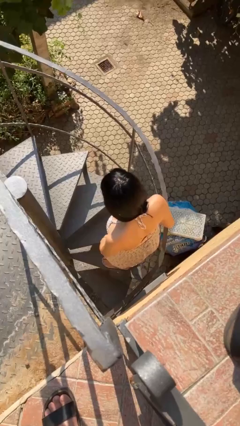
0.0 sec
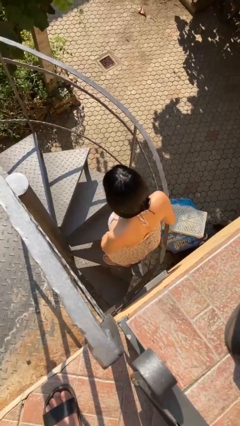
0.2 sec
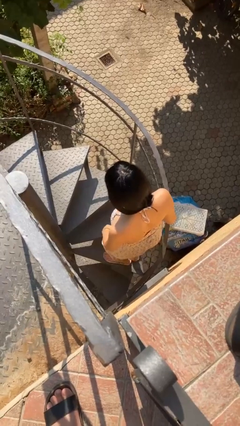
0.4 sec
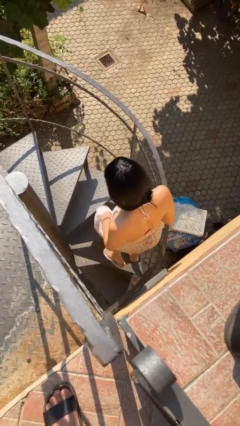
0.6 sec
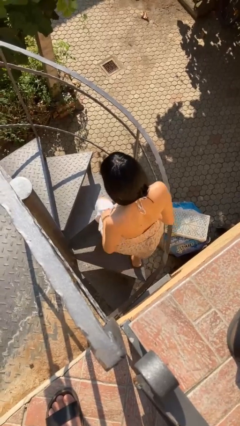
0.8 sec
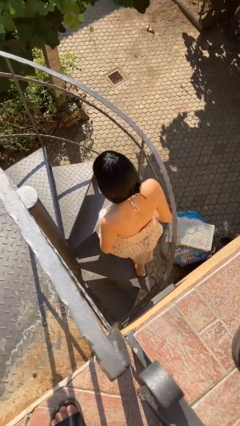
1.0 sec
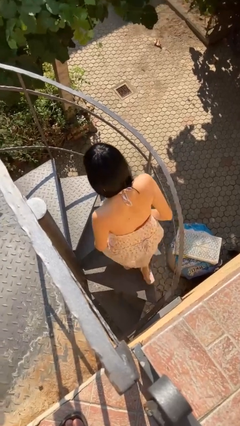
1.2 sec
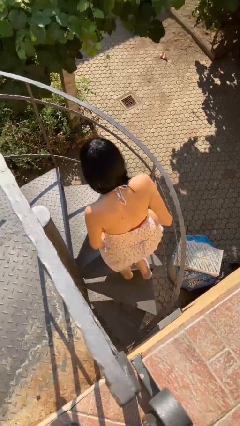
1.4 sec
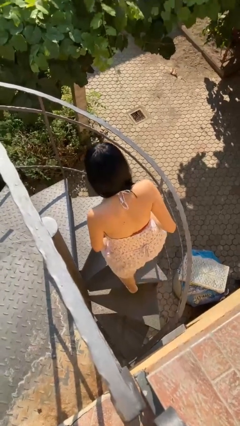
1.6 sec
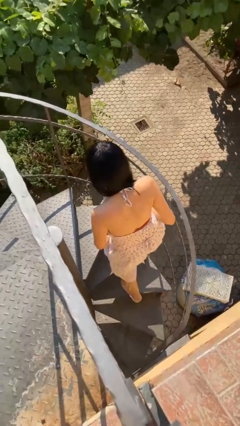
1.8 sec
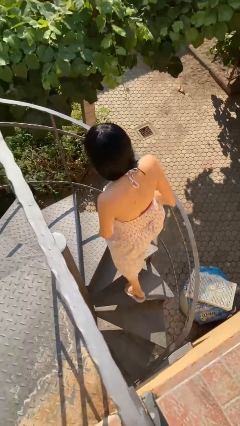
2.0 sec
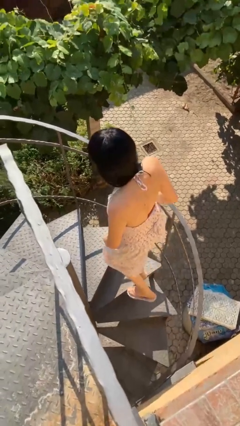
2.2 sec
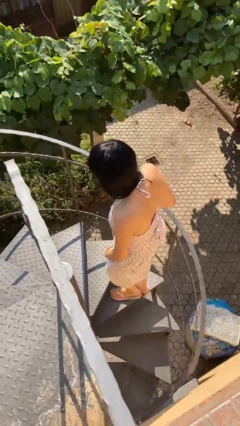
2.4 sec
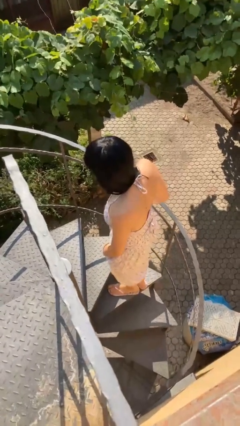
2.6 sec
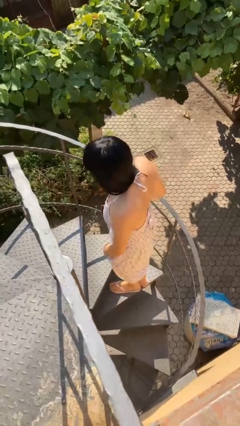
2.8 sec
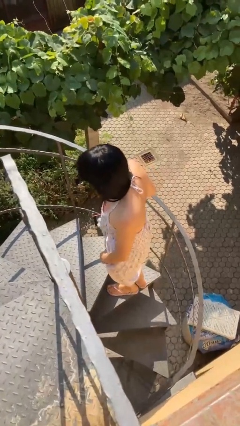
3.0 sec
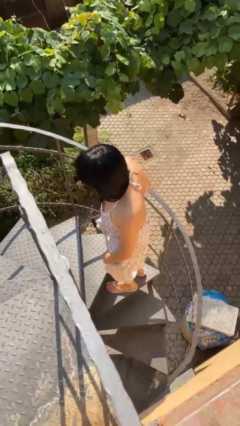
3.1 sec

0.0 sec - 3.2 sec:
person climbs up stairs

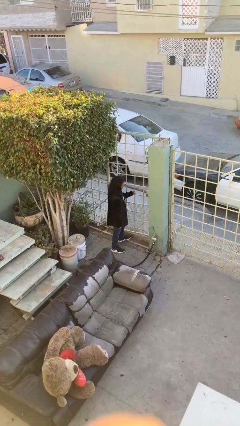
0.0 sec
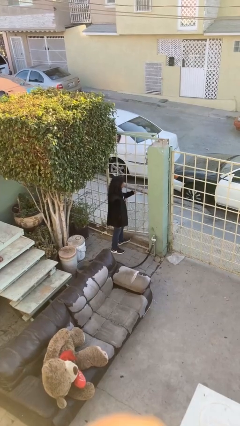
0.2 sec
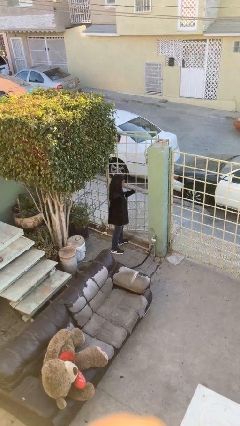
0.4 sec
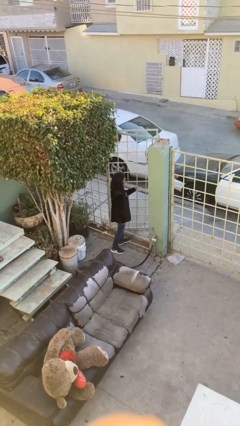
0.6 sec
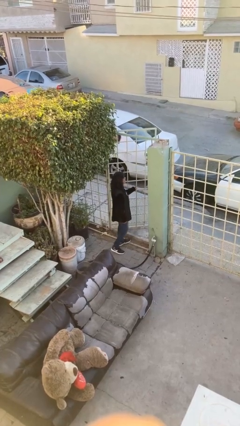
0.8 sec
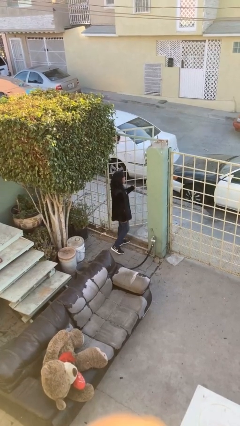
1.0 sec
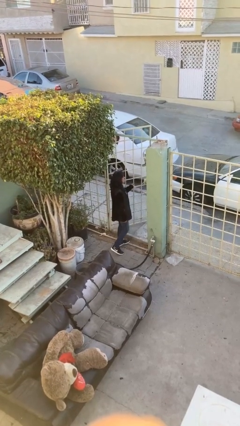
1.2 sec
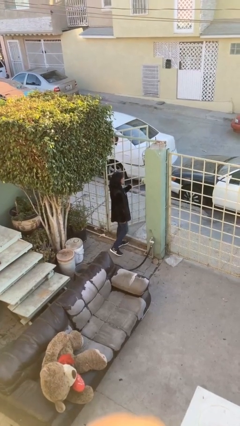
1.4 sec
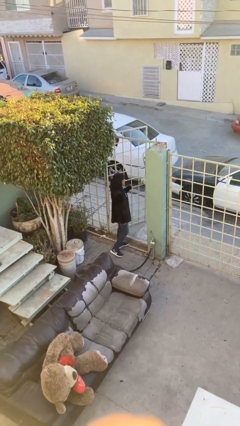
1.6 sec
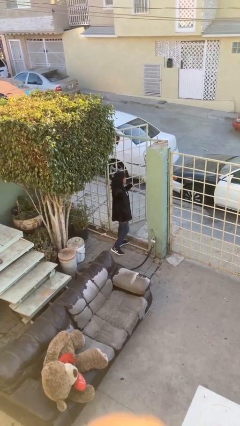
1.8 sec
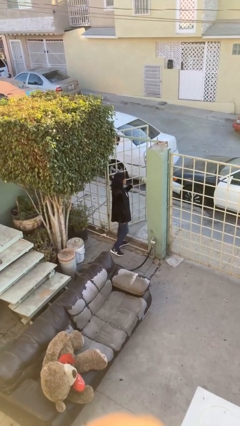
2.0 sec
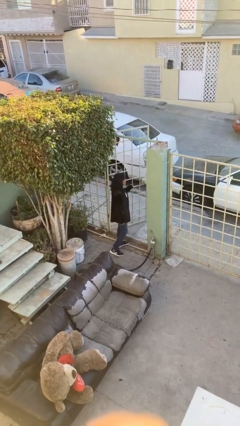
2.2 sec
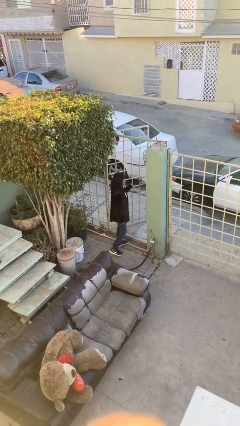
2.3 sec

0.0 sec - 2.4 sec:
person opens facility door

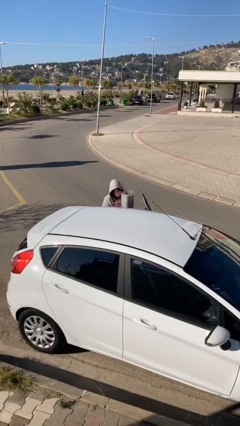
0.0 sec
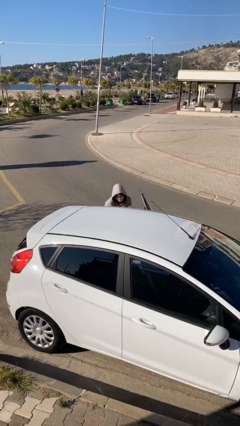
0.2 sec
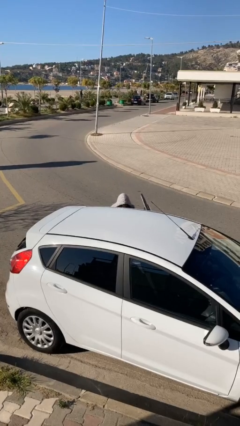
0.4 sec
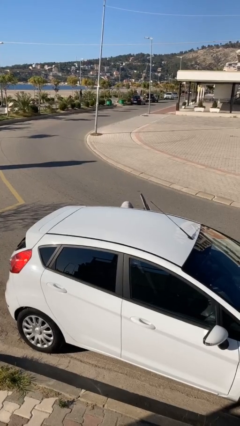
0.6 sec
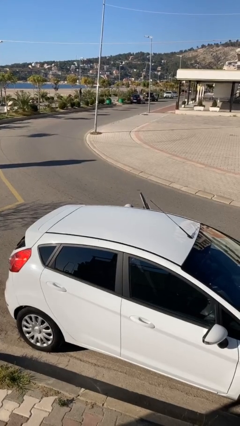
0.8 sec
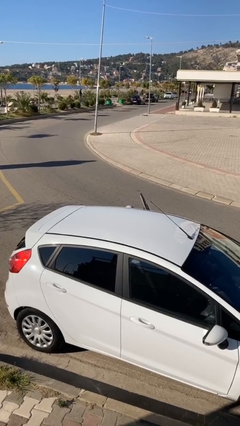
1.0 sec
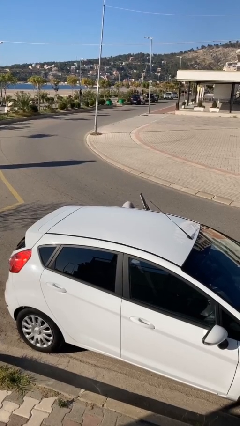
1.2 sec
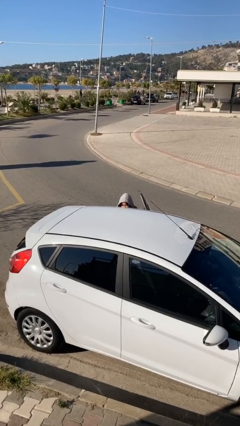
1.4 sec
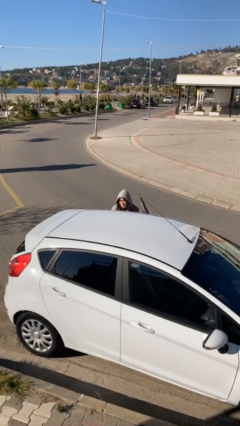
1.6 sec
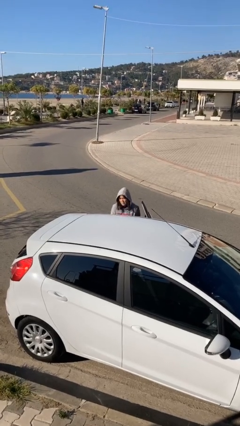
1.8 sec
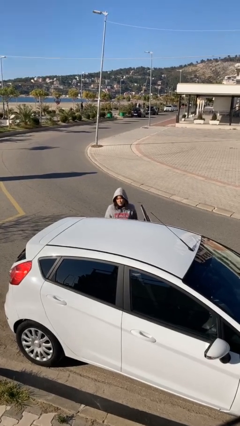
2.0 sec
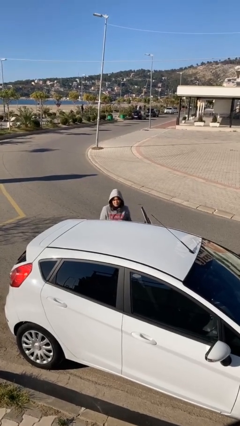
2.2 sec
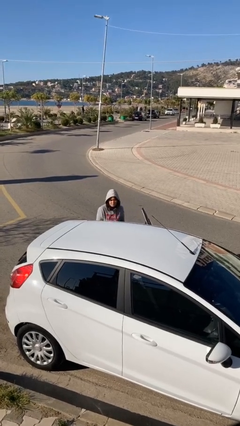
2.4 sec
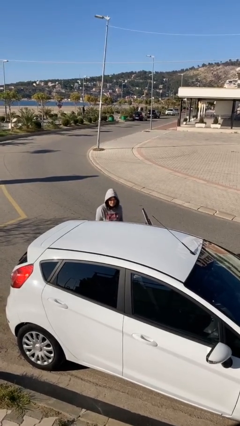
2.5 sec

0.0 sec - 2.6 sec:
person loads car

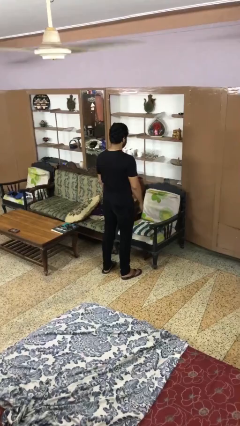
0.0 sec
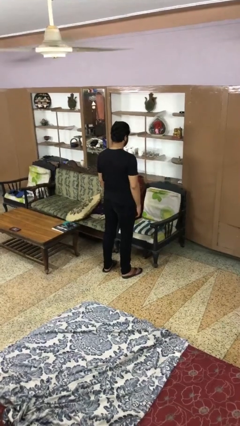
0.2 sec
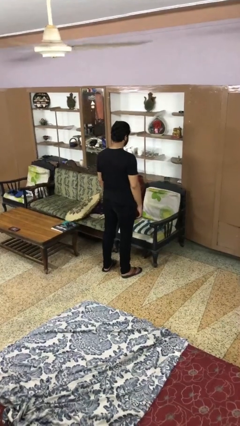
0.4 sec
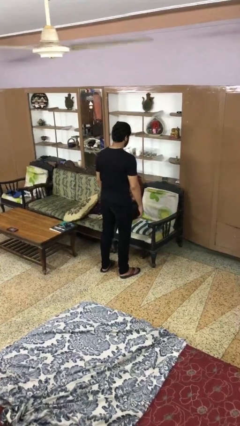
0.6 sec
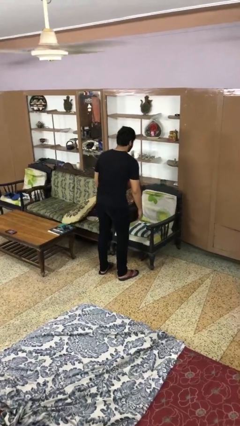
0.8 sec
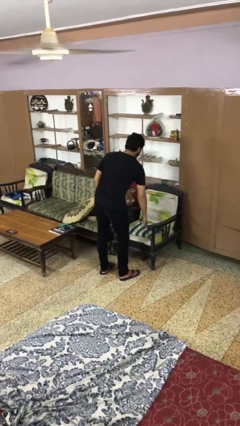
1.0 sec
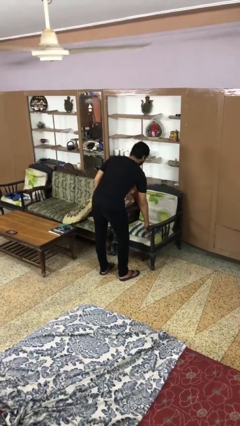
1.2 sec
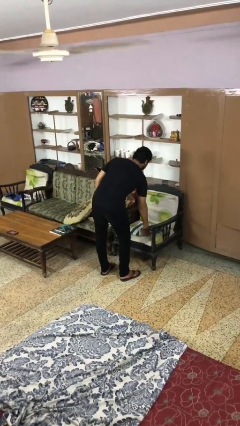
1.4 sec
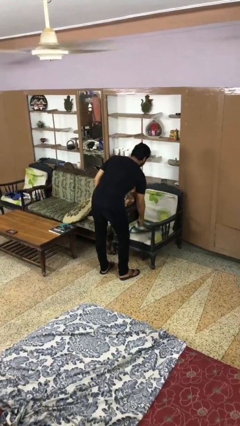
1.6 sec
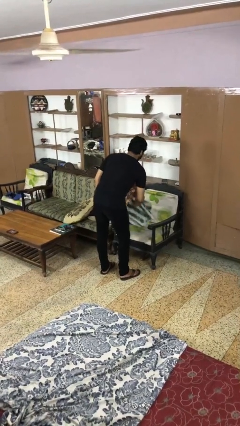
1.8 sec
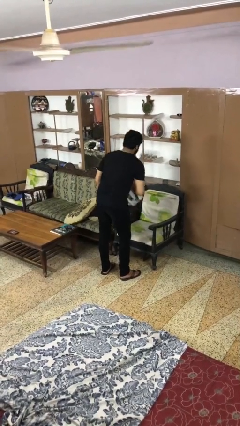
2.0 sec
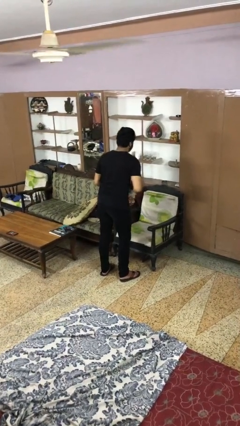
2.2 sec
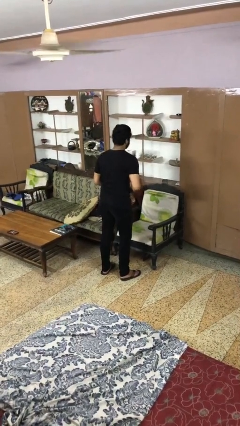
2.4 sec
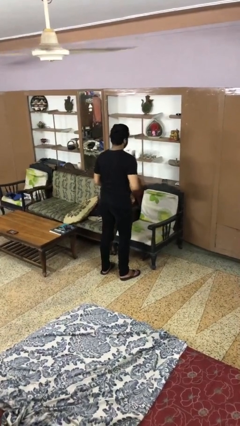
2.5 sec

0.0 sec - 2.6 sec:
person picks up object from couch

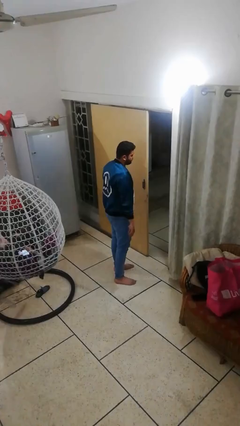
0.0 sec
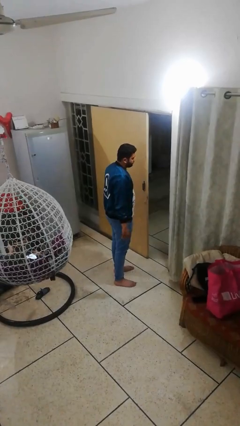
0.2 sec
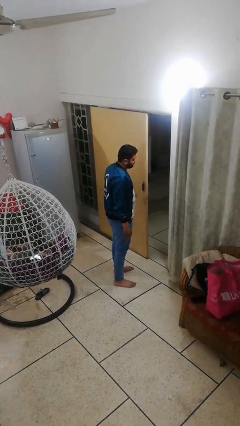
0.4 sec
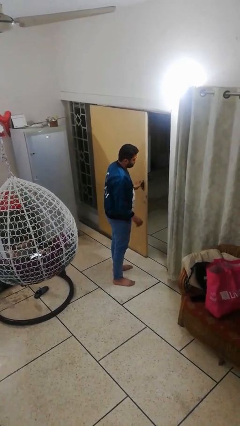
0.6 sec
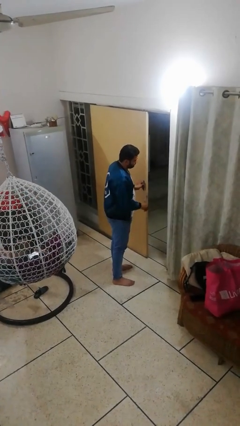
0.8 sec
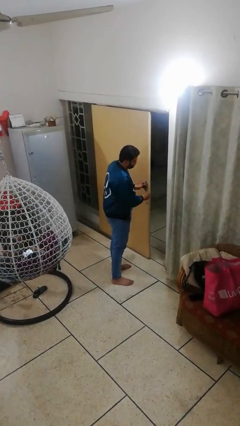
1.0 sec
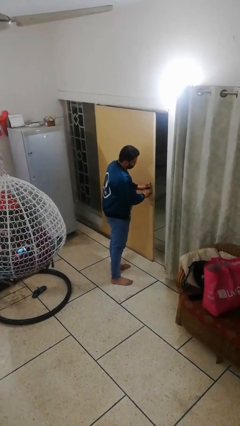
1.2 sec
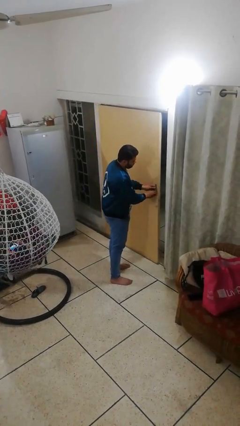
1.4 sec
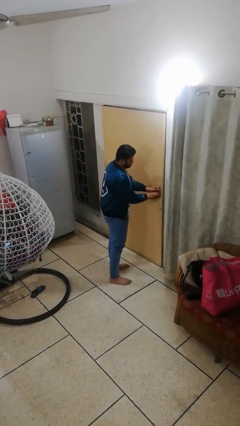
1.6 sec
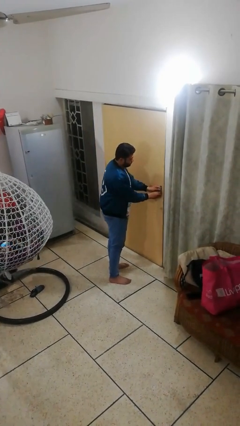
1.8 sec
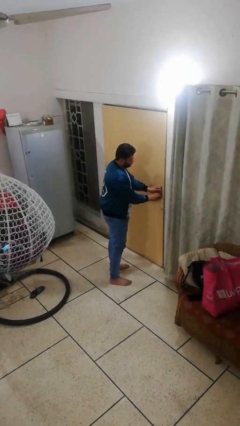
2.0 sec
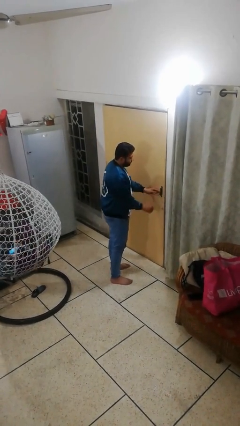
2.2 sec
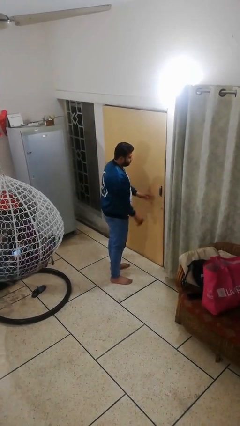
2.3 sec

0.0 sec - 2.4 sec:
person closes facility door

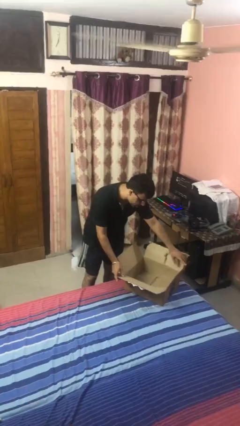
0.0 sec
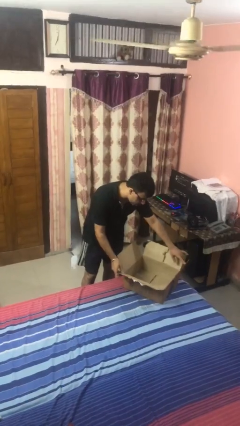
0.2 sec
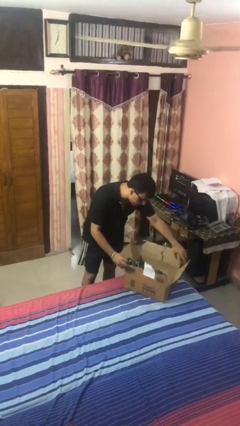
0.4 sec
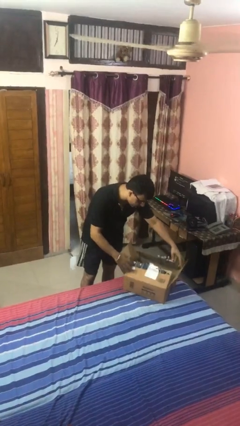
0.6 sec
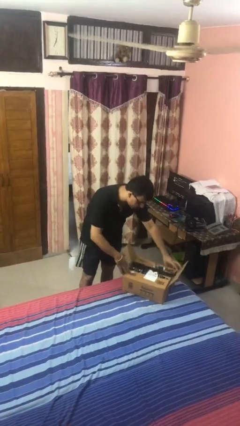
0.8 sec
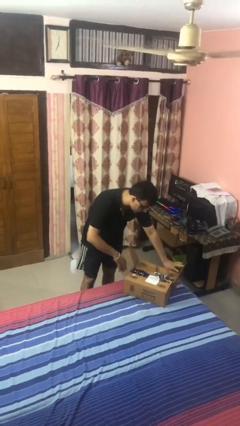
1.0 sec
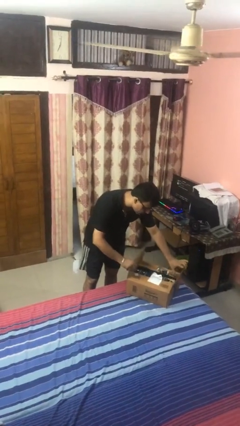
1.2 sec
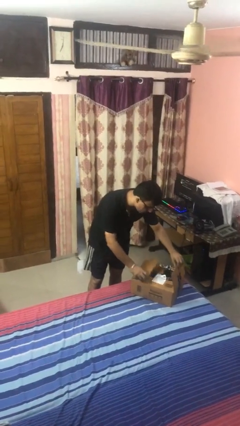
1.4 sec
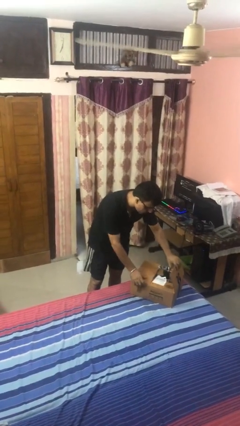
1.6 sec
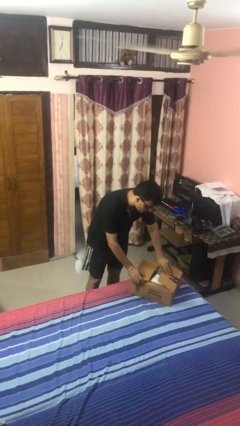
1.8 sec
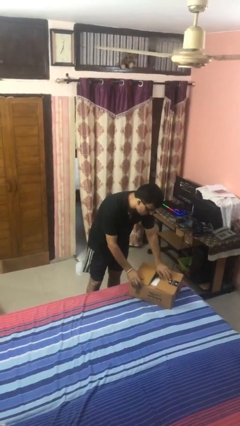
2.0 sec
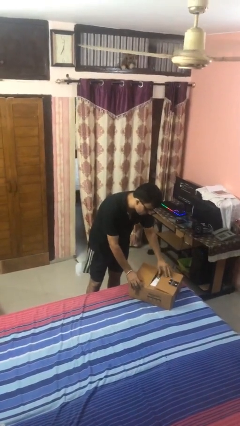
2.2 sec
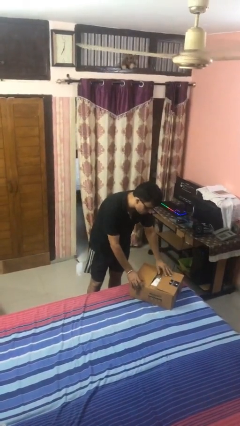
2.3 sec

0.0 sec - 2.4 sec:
person closes box

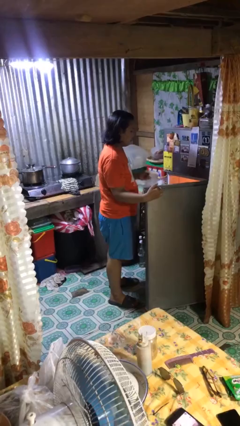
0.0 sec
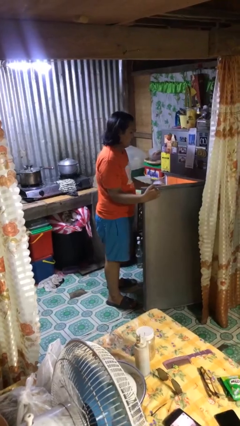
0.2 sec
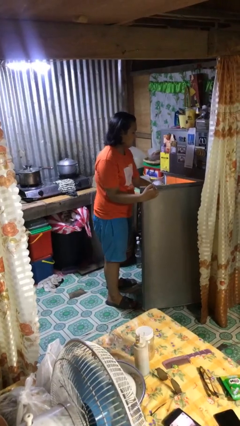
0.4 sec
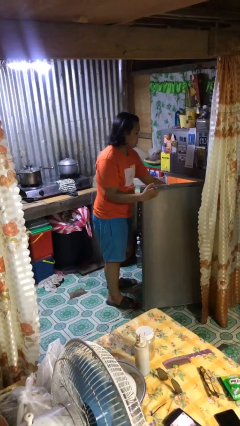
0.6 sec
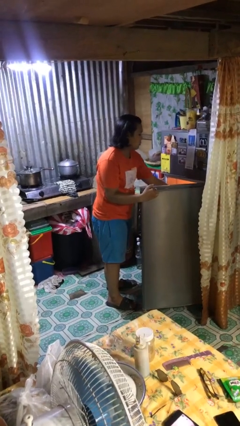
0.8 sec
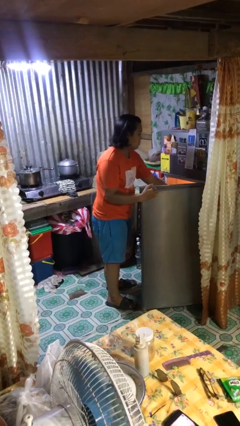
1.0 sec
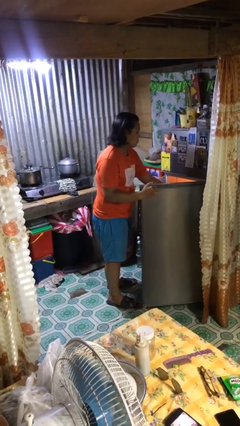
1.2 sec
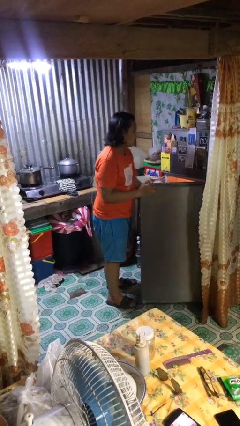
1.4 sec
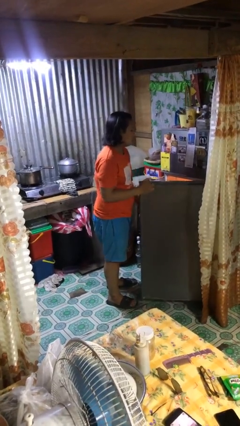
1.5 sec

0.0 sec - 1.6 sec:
person puts object into refrigerator
